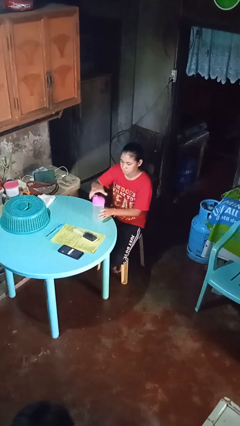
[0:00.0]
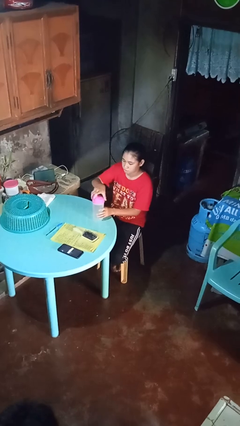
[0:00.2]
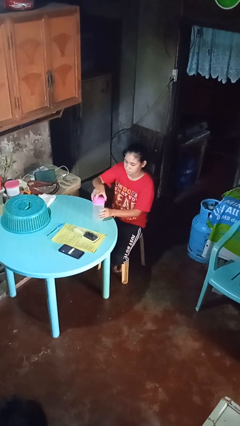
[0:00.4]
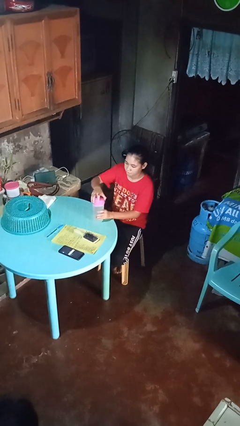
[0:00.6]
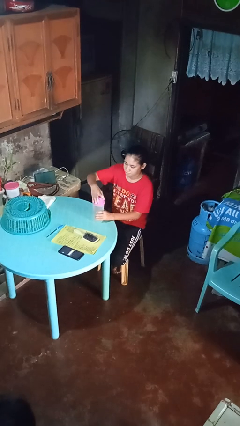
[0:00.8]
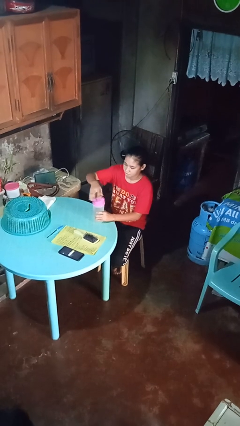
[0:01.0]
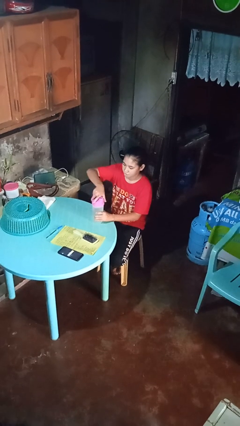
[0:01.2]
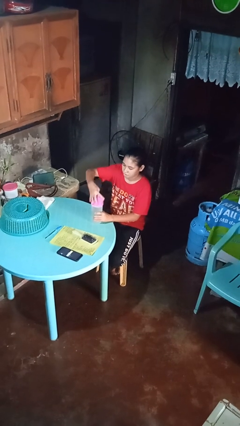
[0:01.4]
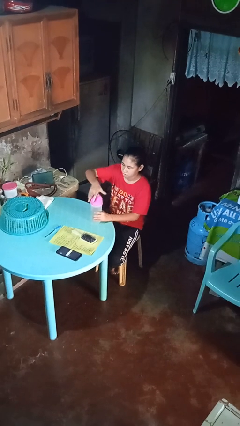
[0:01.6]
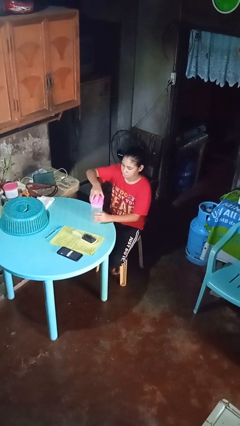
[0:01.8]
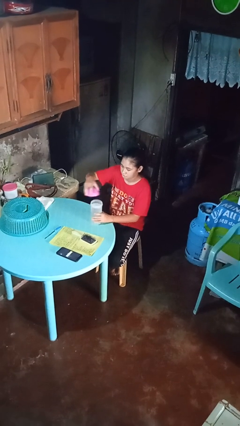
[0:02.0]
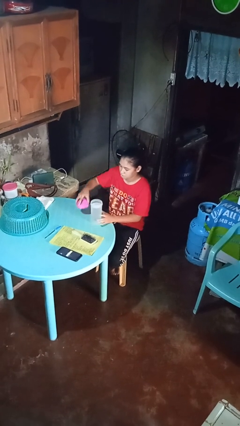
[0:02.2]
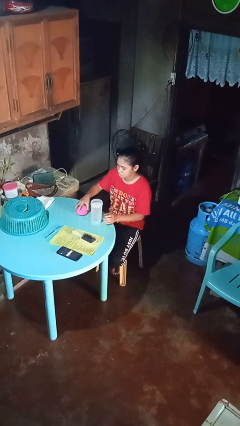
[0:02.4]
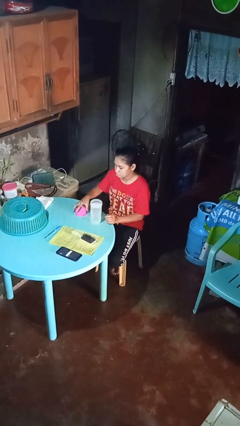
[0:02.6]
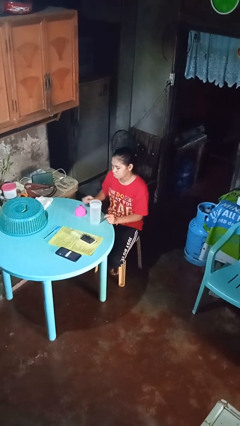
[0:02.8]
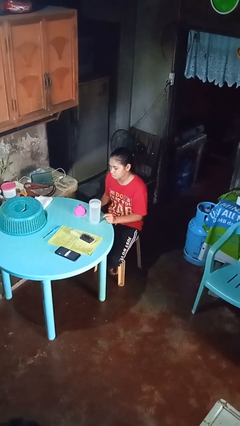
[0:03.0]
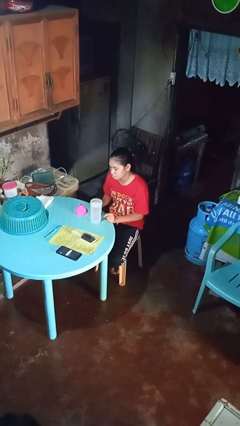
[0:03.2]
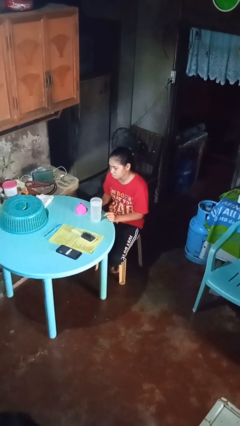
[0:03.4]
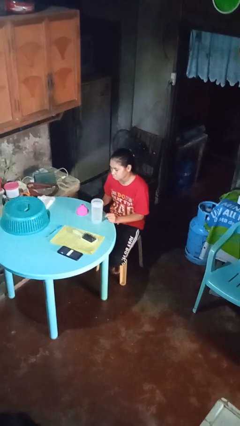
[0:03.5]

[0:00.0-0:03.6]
person unscrews lid from bottle

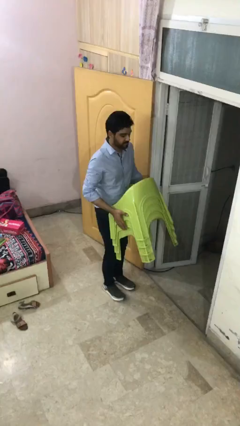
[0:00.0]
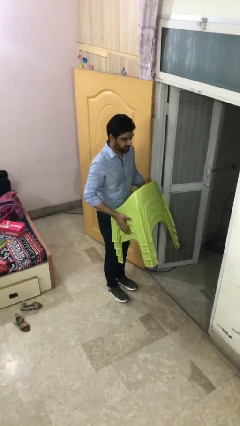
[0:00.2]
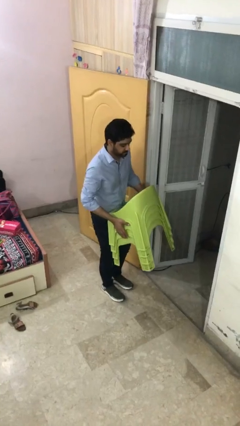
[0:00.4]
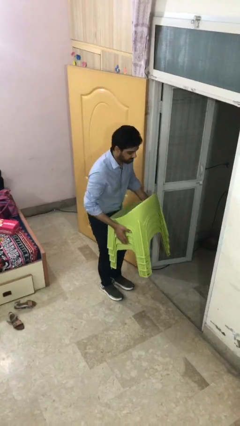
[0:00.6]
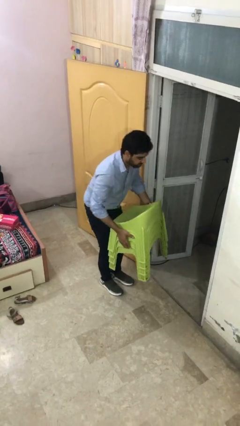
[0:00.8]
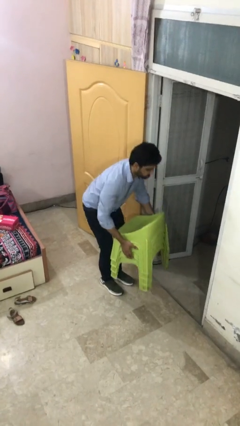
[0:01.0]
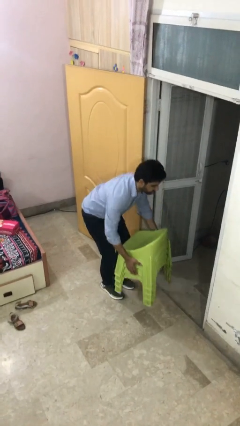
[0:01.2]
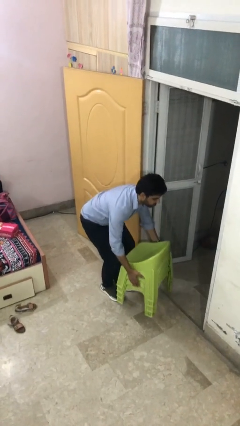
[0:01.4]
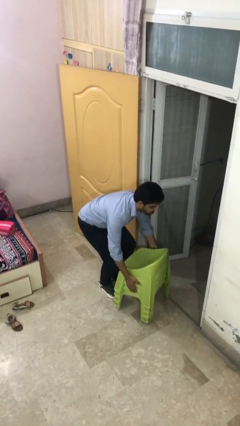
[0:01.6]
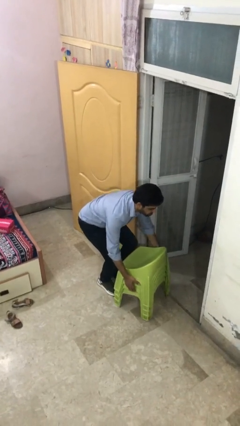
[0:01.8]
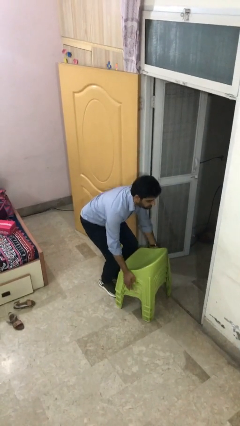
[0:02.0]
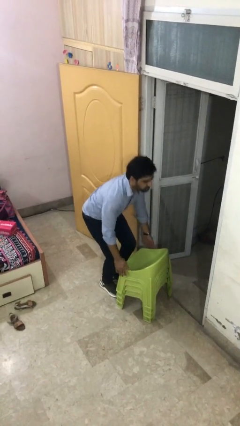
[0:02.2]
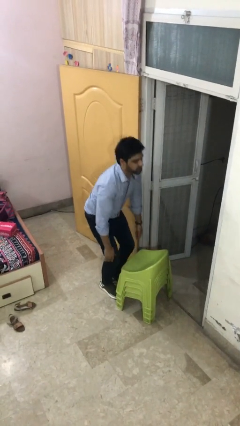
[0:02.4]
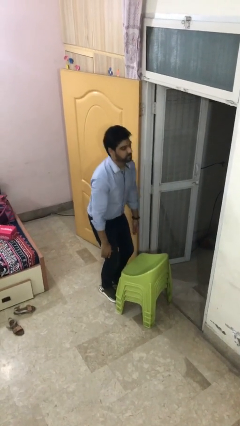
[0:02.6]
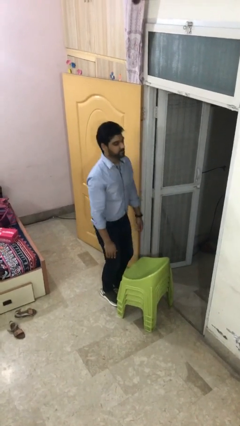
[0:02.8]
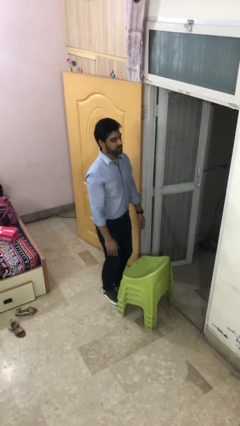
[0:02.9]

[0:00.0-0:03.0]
person puts down object on floor

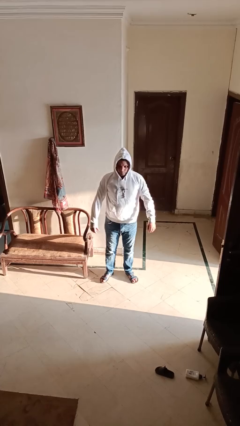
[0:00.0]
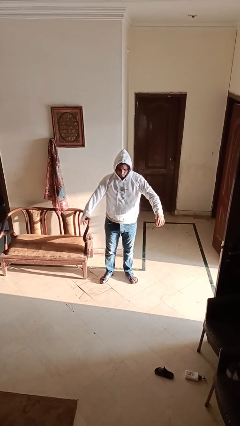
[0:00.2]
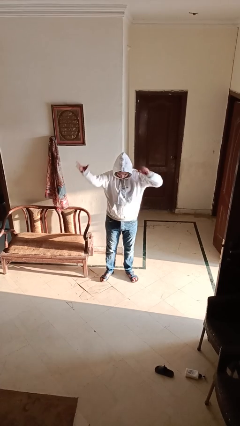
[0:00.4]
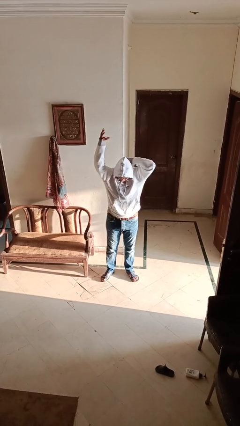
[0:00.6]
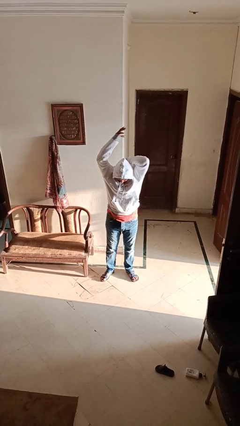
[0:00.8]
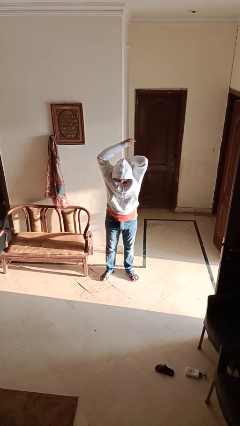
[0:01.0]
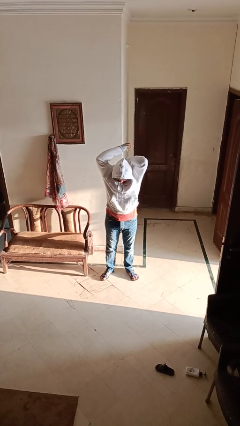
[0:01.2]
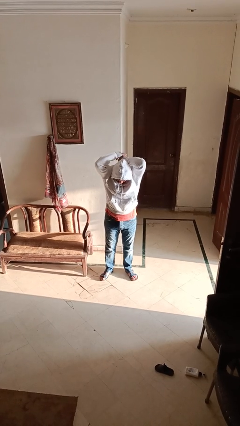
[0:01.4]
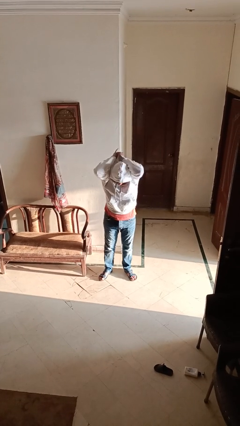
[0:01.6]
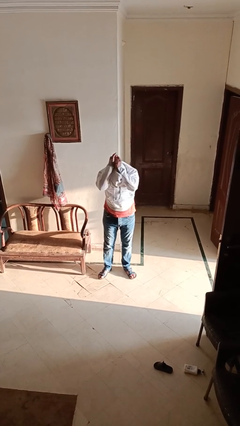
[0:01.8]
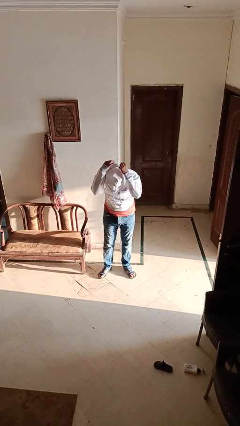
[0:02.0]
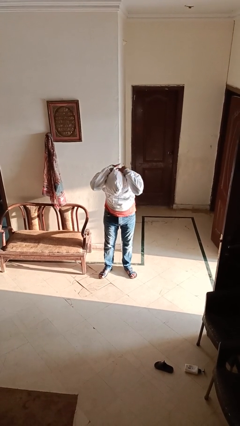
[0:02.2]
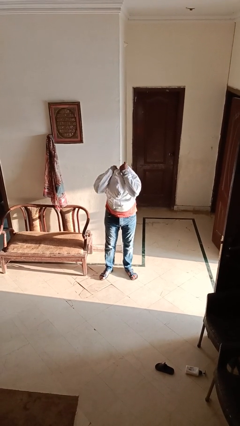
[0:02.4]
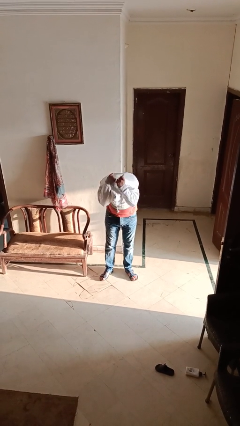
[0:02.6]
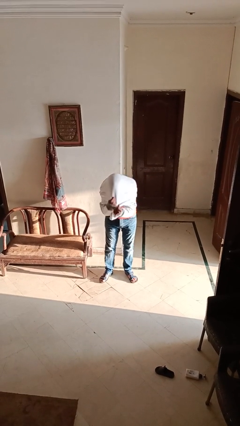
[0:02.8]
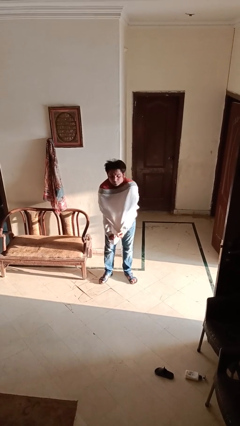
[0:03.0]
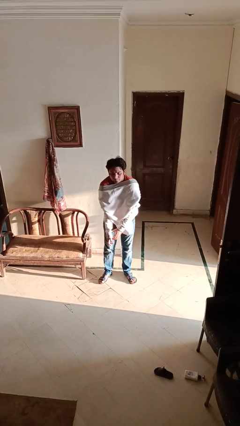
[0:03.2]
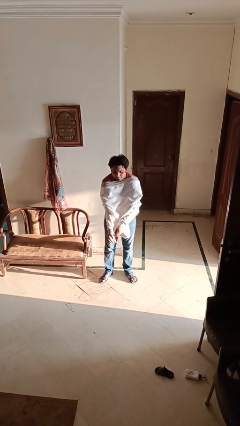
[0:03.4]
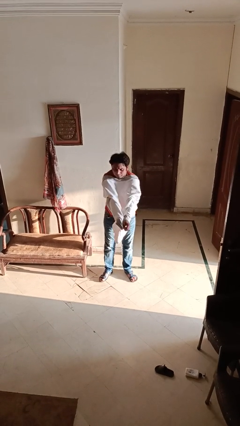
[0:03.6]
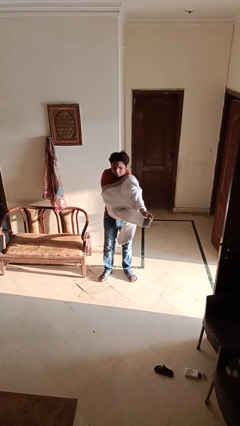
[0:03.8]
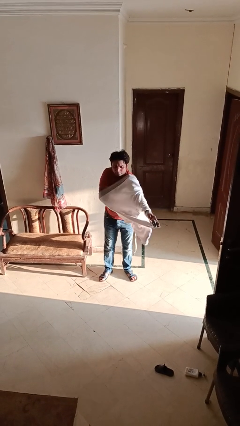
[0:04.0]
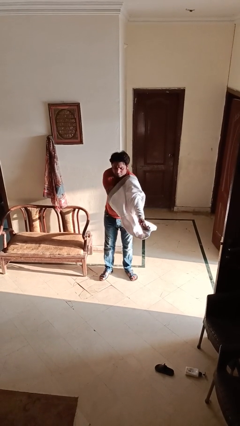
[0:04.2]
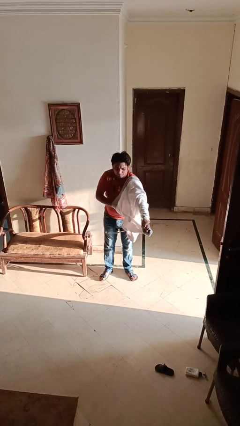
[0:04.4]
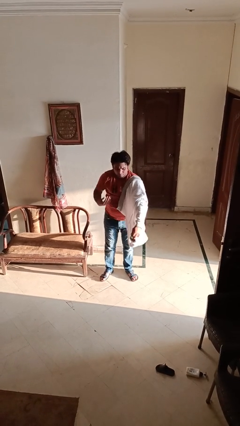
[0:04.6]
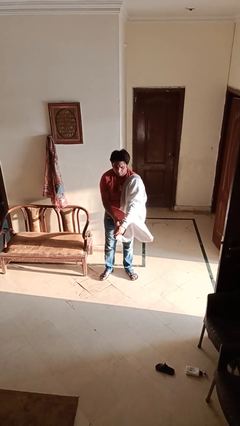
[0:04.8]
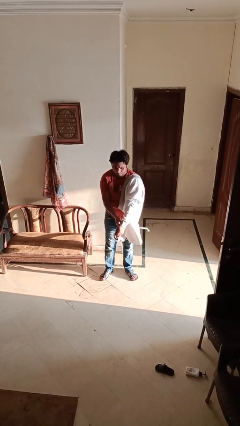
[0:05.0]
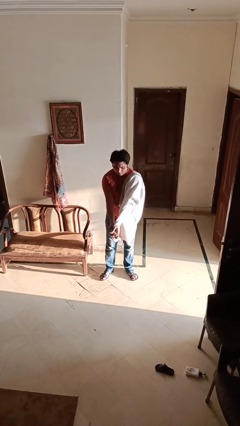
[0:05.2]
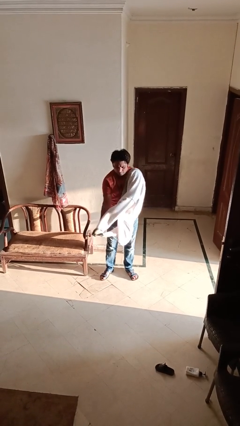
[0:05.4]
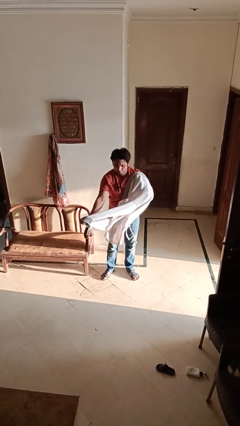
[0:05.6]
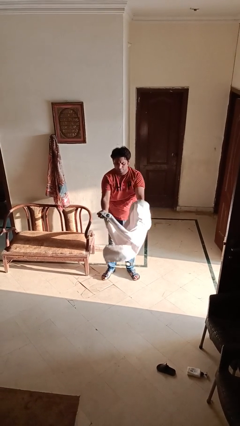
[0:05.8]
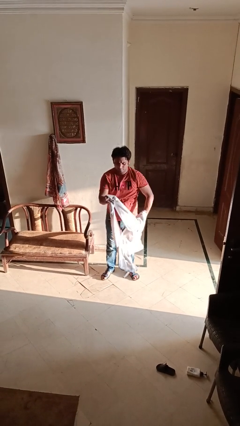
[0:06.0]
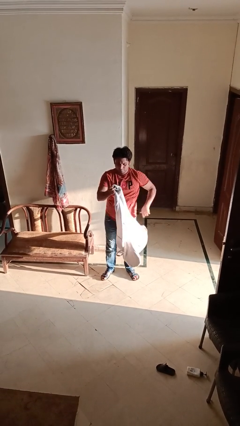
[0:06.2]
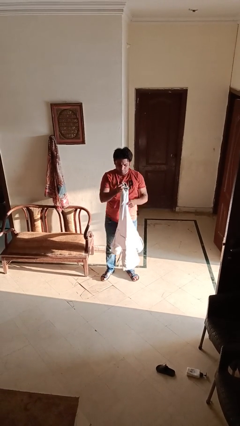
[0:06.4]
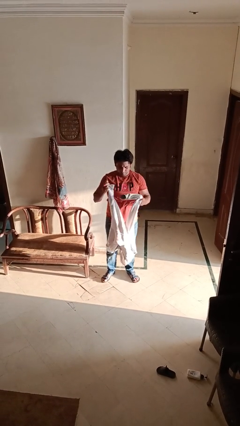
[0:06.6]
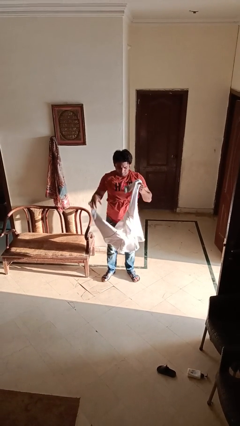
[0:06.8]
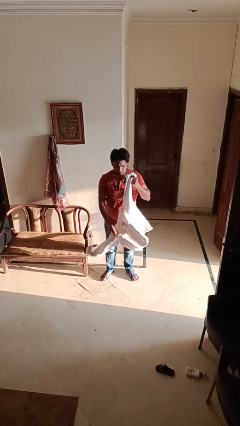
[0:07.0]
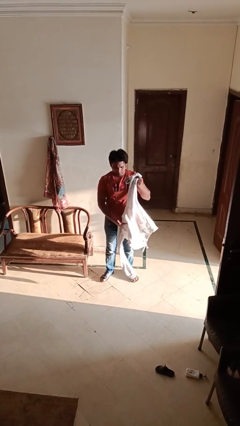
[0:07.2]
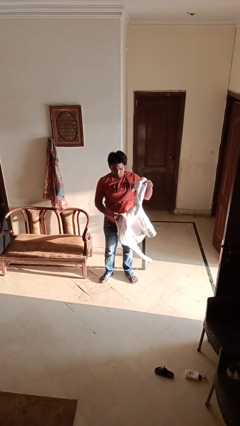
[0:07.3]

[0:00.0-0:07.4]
person takes off hoodie

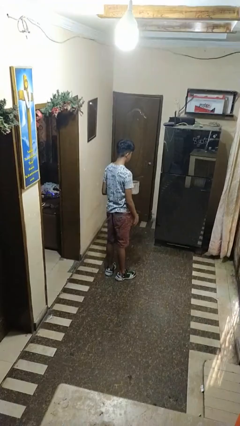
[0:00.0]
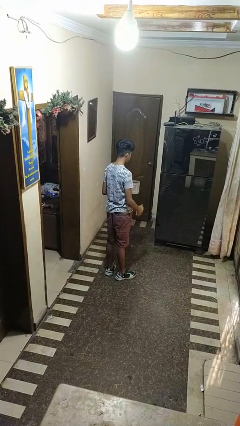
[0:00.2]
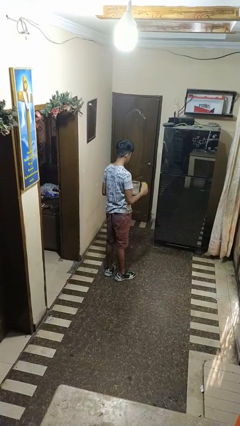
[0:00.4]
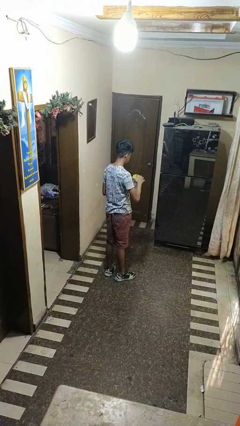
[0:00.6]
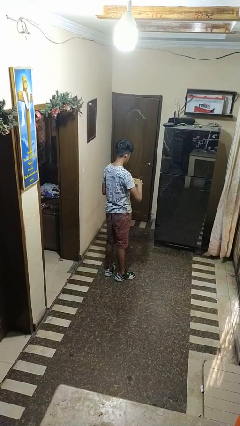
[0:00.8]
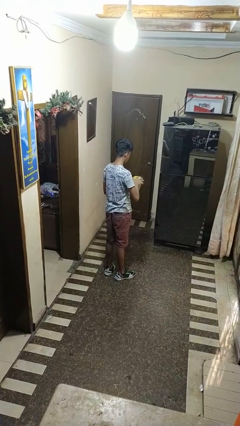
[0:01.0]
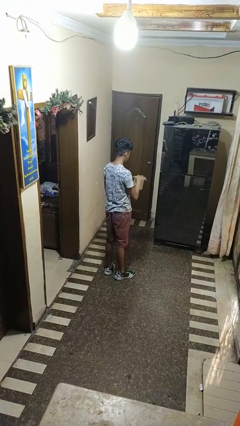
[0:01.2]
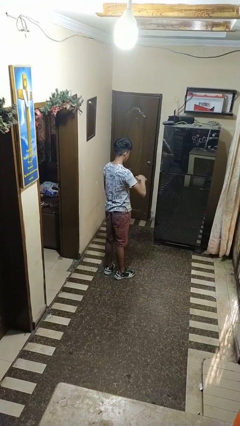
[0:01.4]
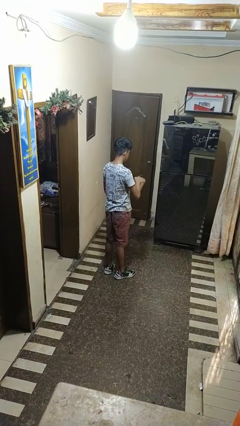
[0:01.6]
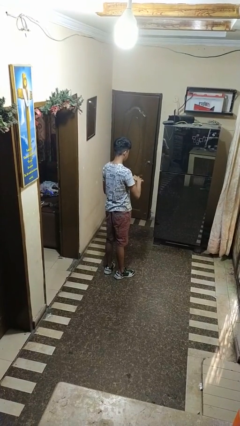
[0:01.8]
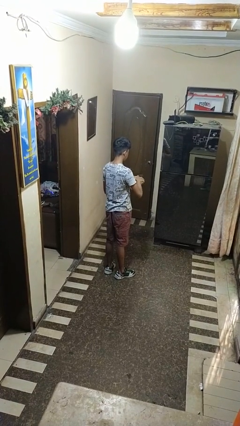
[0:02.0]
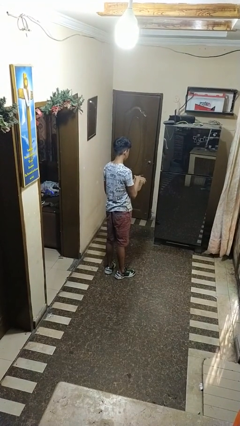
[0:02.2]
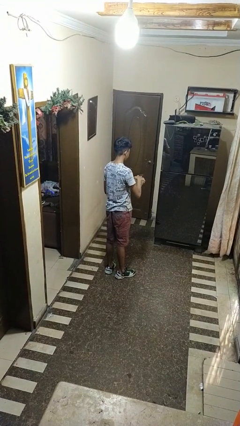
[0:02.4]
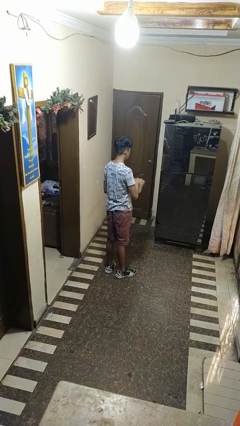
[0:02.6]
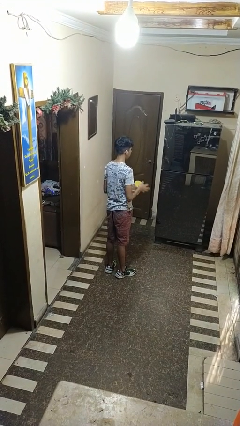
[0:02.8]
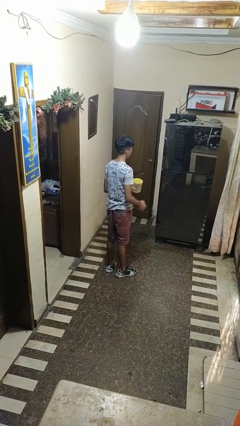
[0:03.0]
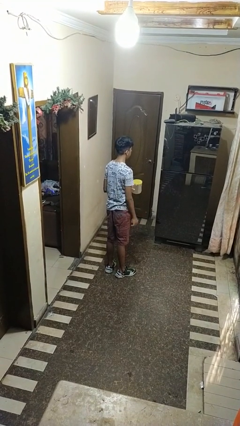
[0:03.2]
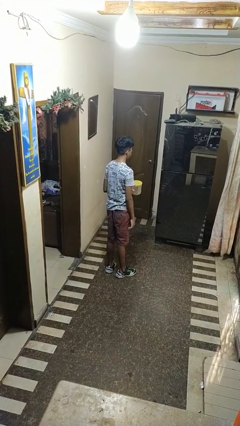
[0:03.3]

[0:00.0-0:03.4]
person closes jar

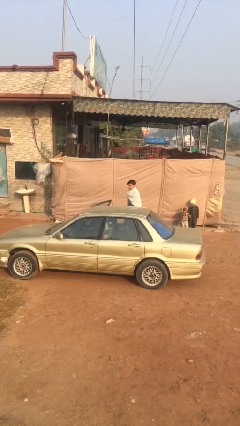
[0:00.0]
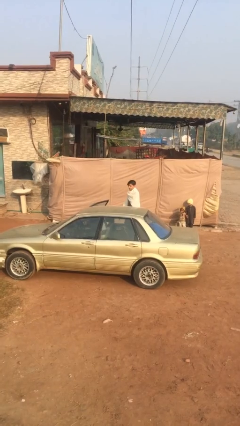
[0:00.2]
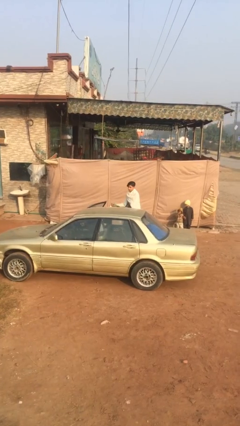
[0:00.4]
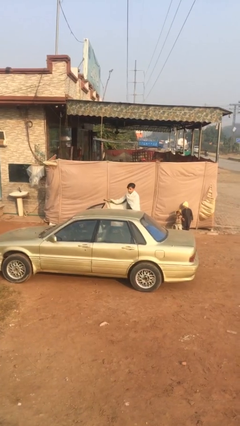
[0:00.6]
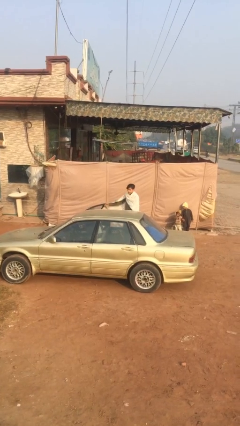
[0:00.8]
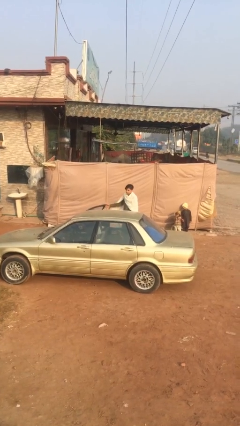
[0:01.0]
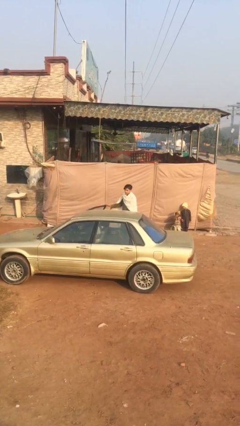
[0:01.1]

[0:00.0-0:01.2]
person closes car door
